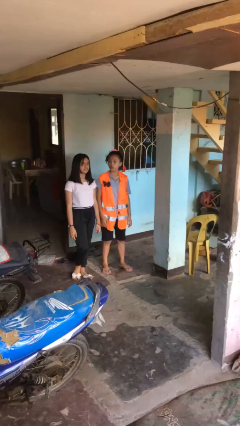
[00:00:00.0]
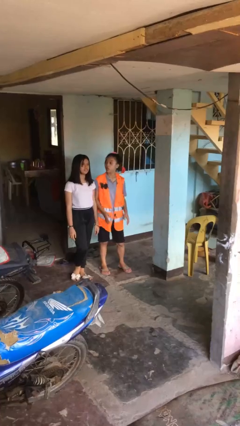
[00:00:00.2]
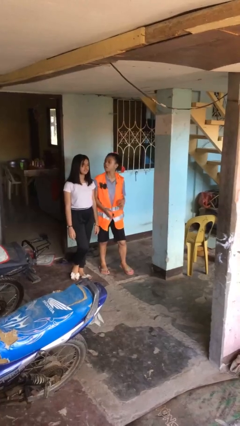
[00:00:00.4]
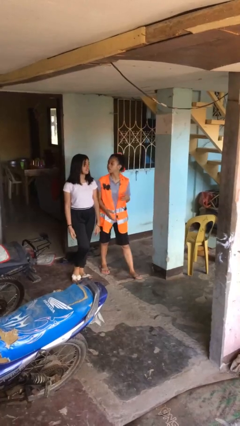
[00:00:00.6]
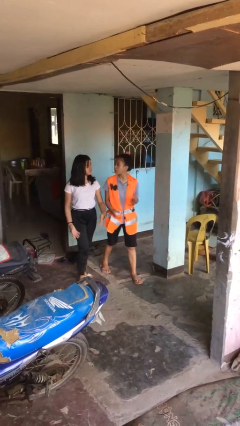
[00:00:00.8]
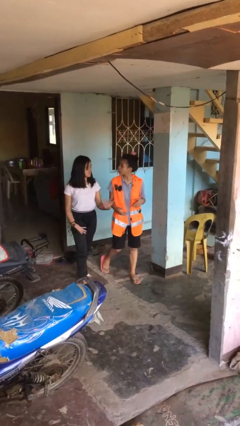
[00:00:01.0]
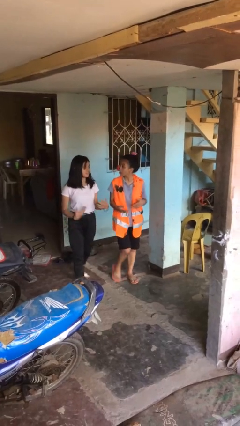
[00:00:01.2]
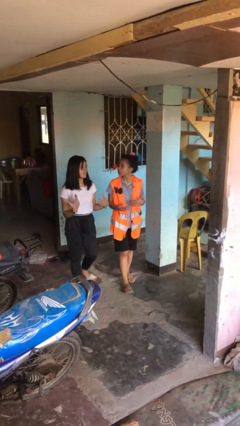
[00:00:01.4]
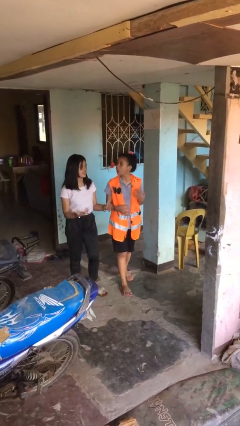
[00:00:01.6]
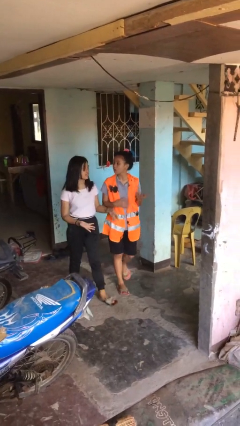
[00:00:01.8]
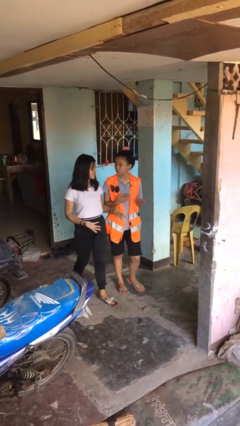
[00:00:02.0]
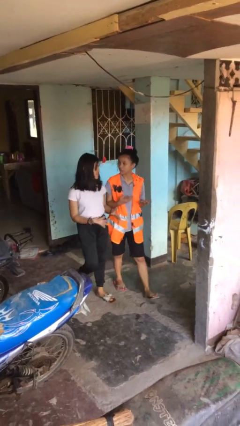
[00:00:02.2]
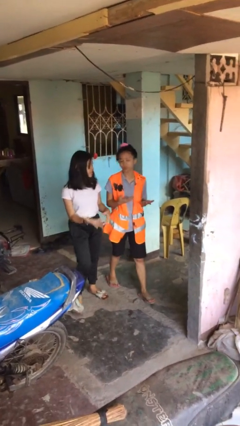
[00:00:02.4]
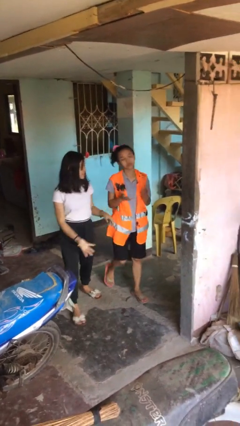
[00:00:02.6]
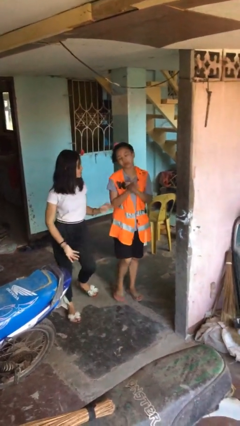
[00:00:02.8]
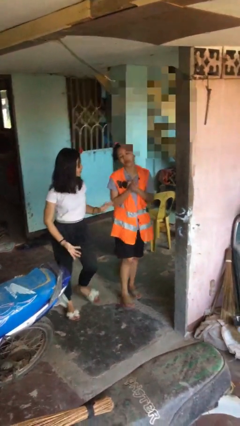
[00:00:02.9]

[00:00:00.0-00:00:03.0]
person talks to person

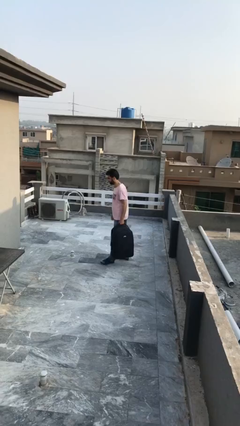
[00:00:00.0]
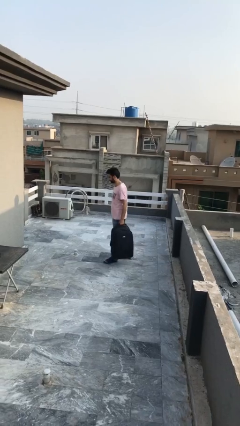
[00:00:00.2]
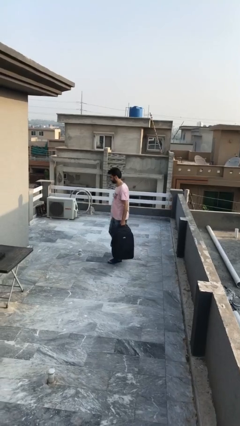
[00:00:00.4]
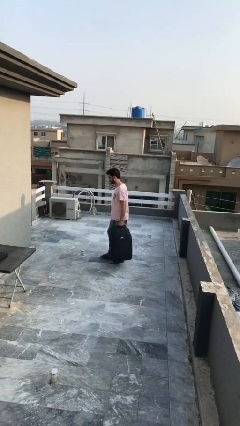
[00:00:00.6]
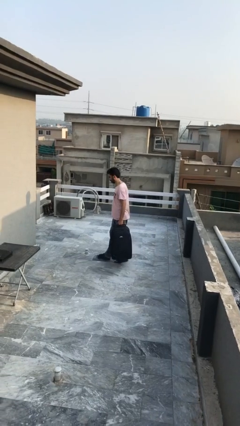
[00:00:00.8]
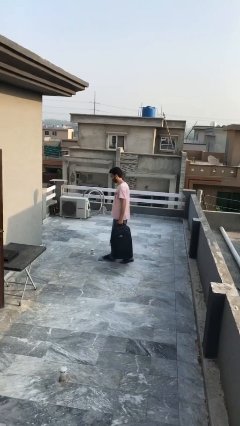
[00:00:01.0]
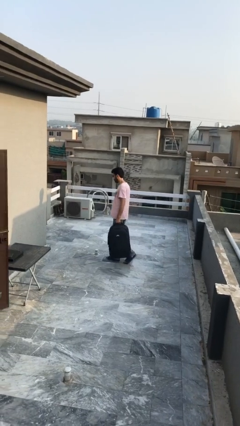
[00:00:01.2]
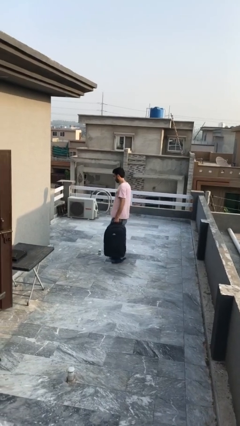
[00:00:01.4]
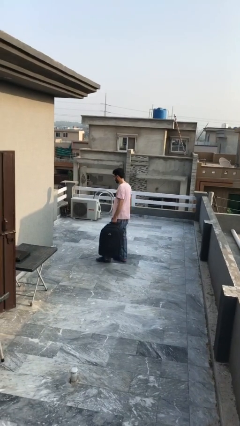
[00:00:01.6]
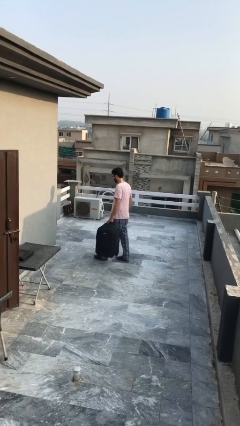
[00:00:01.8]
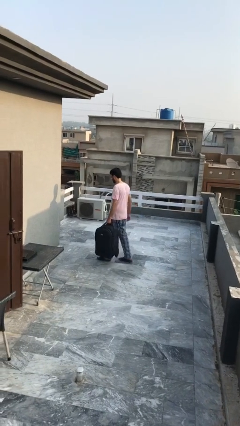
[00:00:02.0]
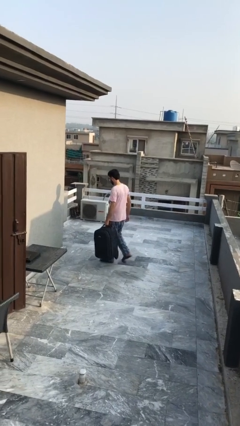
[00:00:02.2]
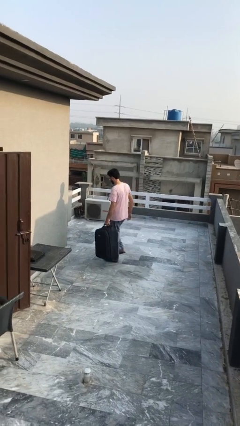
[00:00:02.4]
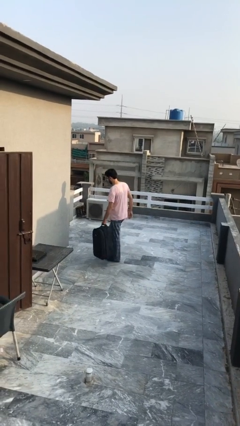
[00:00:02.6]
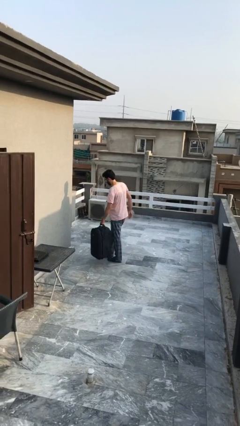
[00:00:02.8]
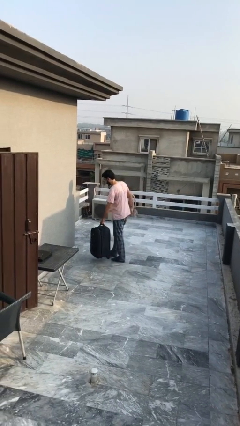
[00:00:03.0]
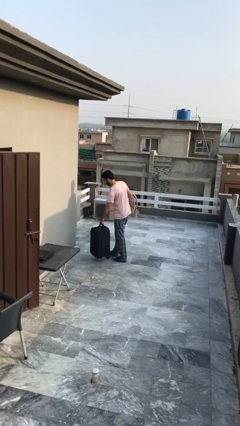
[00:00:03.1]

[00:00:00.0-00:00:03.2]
person carries heavy object

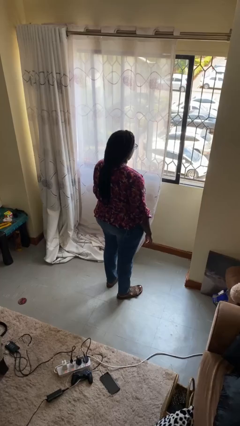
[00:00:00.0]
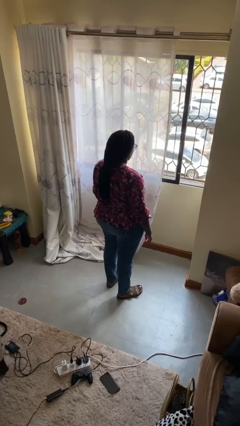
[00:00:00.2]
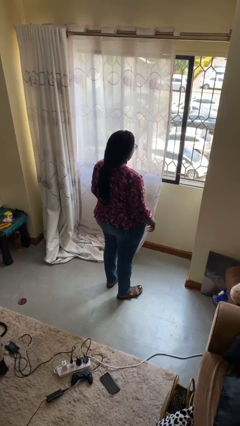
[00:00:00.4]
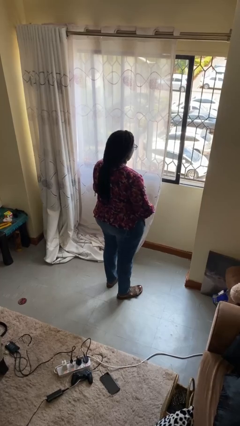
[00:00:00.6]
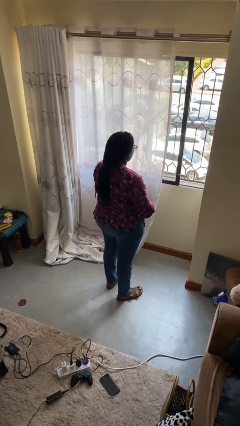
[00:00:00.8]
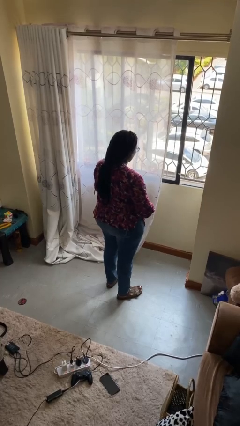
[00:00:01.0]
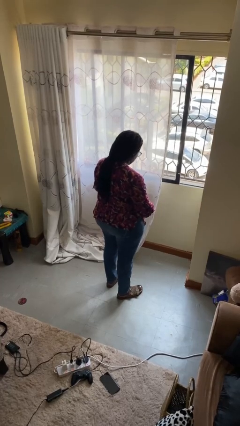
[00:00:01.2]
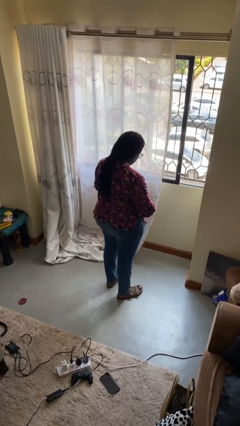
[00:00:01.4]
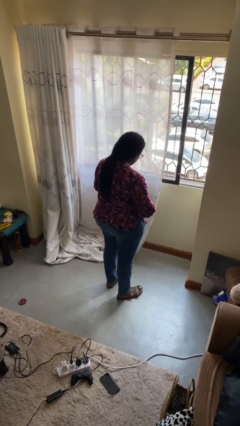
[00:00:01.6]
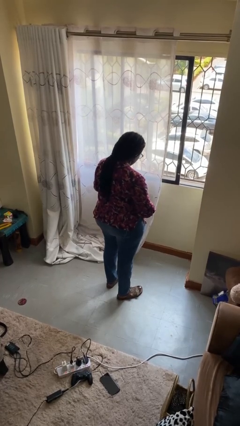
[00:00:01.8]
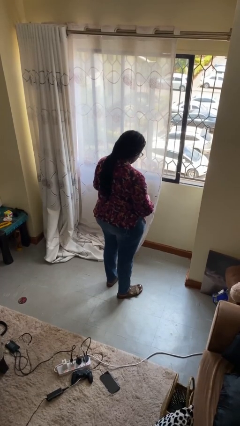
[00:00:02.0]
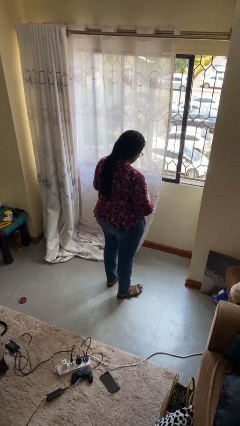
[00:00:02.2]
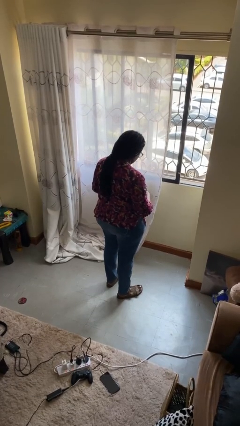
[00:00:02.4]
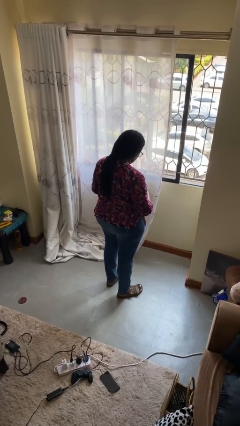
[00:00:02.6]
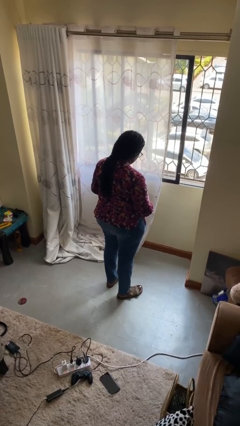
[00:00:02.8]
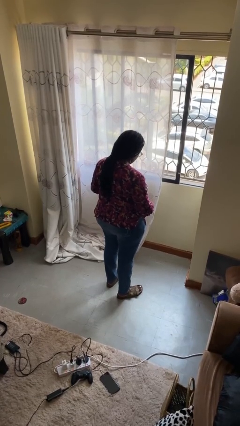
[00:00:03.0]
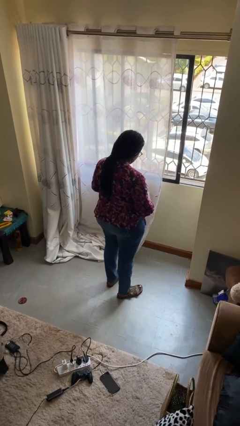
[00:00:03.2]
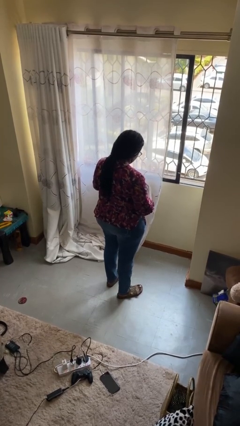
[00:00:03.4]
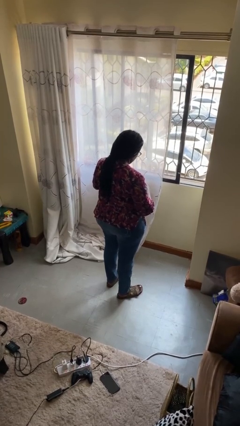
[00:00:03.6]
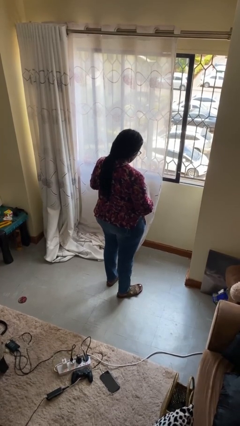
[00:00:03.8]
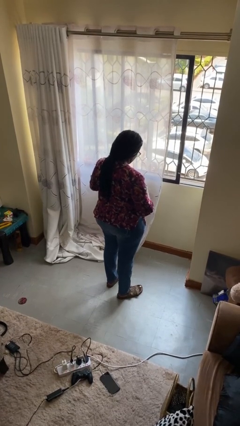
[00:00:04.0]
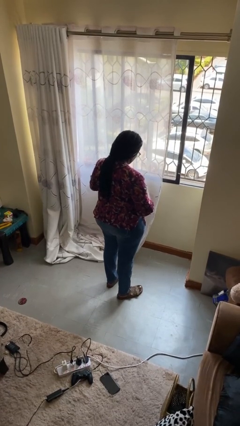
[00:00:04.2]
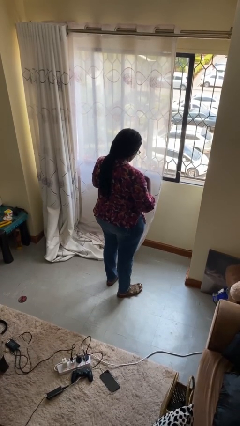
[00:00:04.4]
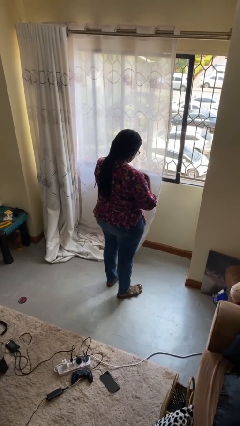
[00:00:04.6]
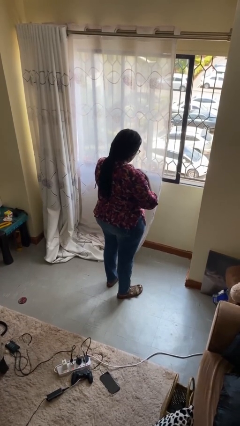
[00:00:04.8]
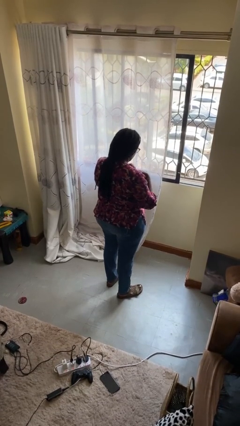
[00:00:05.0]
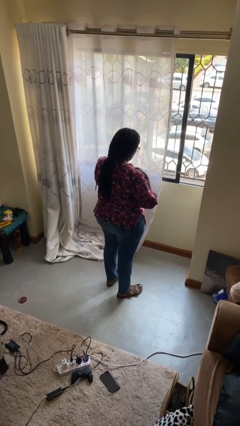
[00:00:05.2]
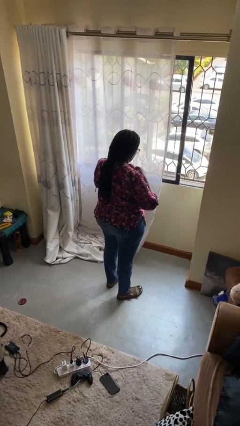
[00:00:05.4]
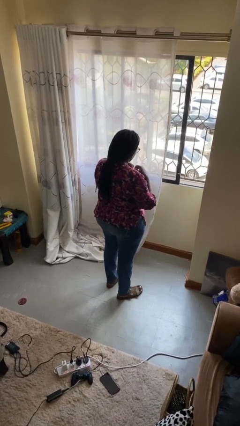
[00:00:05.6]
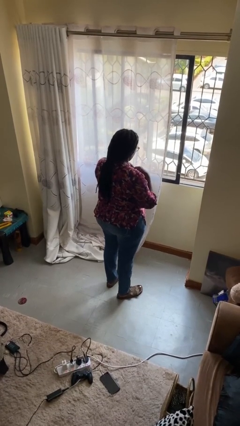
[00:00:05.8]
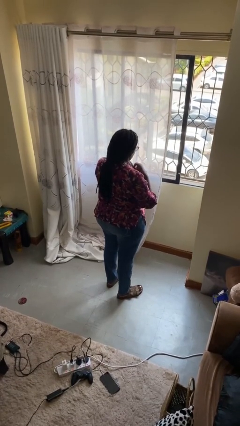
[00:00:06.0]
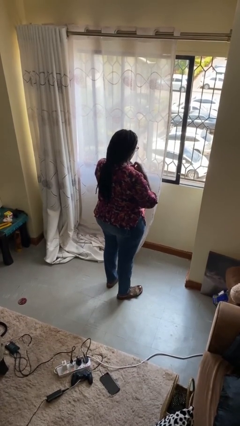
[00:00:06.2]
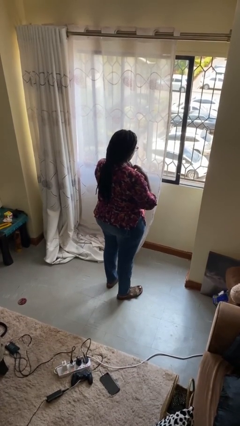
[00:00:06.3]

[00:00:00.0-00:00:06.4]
person buttons shirt

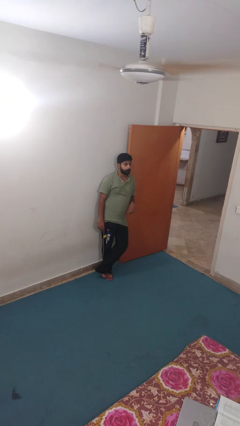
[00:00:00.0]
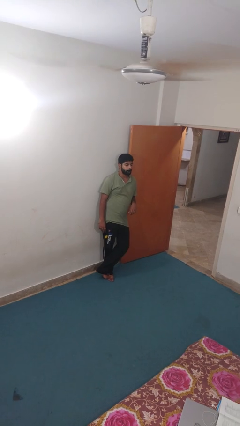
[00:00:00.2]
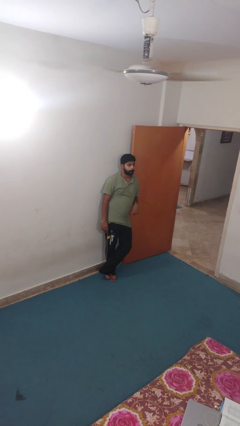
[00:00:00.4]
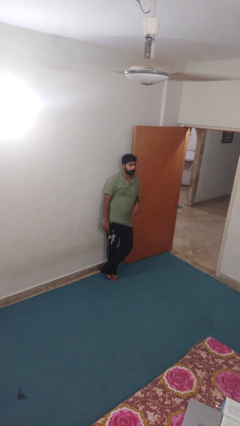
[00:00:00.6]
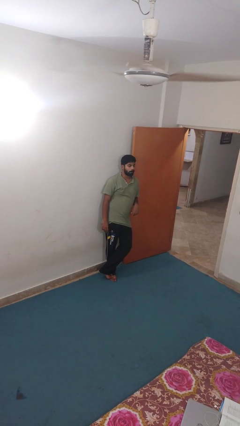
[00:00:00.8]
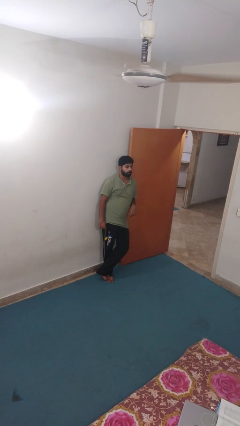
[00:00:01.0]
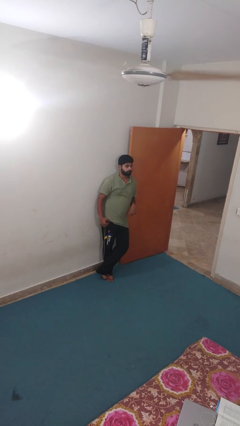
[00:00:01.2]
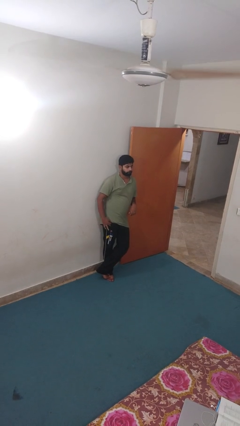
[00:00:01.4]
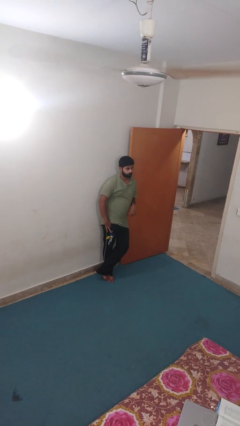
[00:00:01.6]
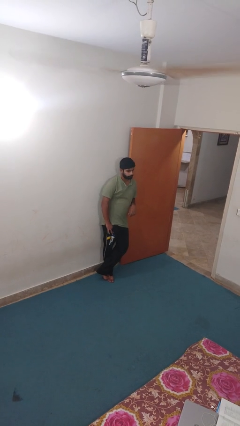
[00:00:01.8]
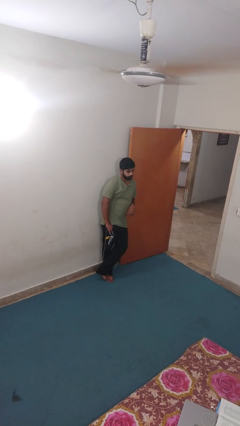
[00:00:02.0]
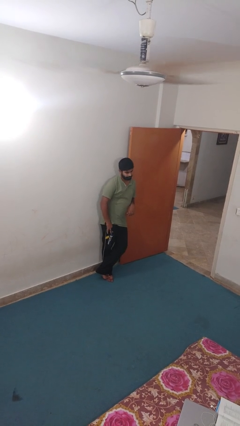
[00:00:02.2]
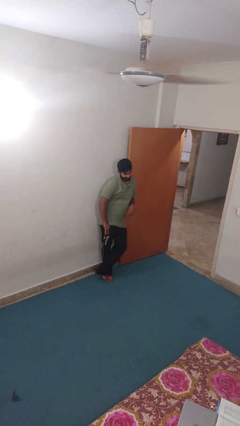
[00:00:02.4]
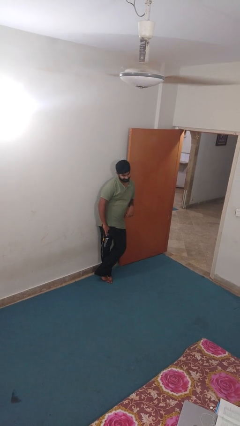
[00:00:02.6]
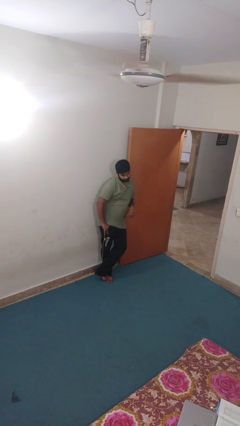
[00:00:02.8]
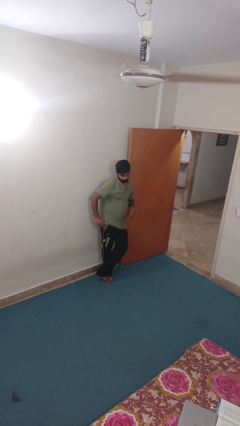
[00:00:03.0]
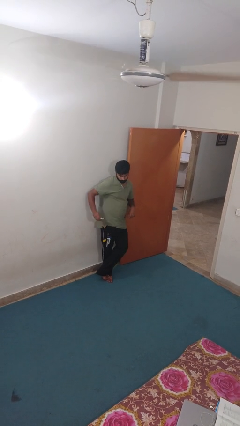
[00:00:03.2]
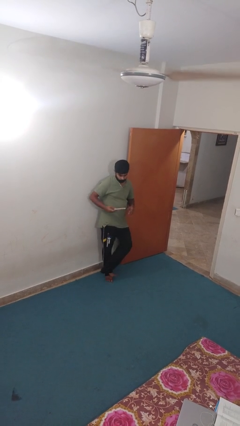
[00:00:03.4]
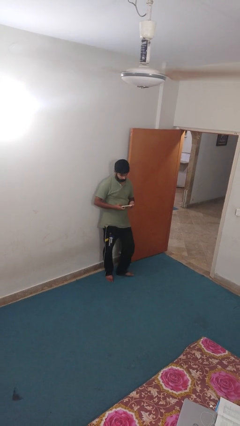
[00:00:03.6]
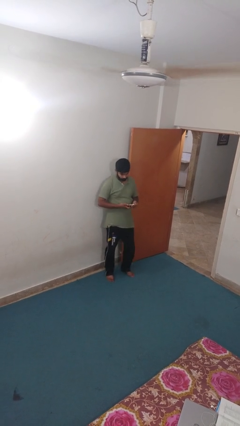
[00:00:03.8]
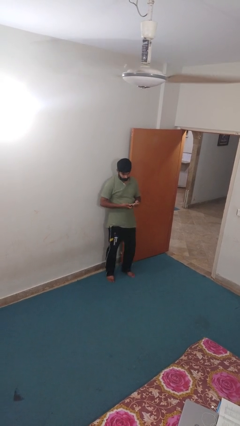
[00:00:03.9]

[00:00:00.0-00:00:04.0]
person takes phone from pocket

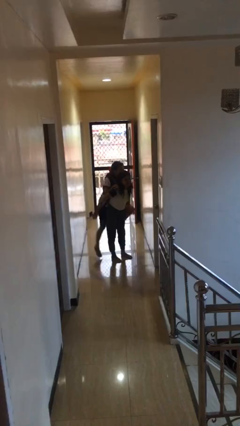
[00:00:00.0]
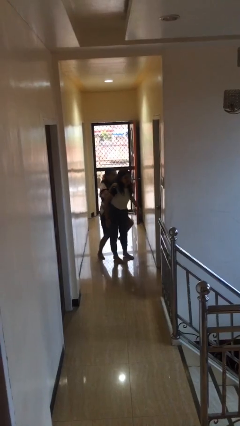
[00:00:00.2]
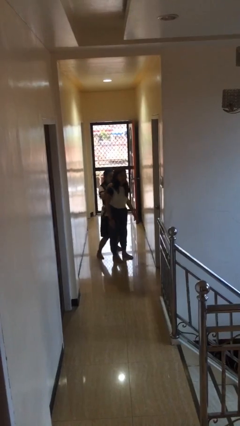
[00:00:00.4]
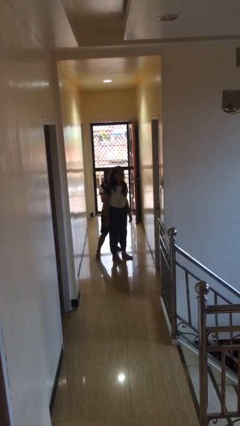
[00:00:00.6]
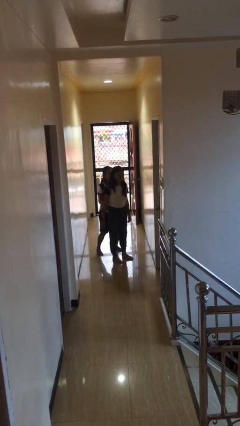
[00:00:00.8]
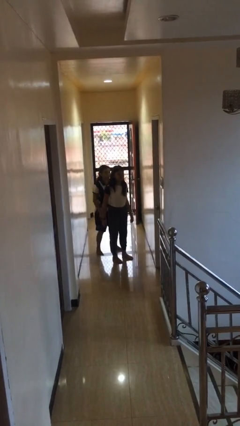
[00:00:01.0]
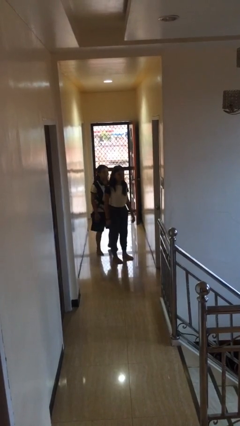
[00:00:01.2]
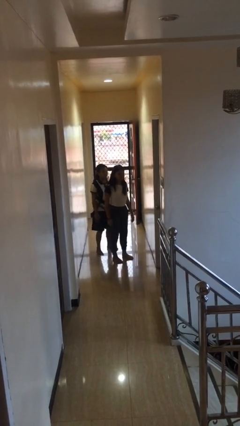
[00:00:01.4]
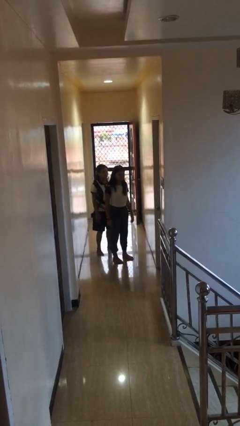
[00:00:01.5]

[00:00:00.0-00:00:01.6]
person puts down person
